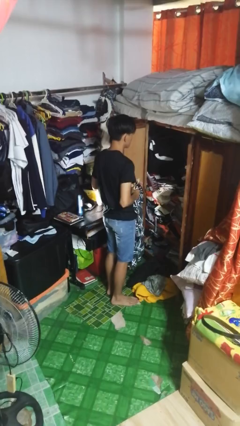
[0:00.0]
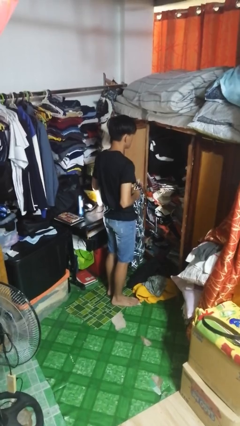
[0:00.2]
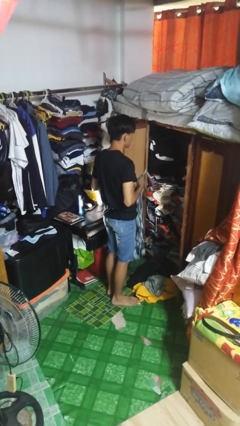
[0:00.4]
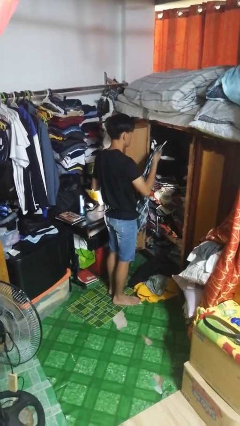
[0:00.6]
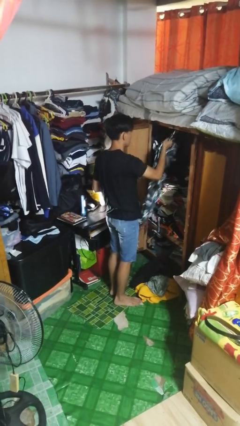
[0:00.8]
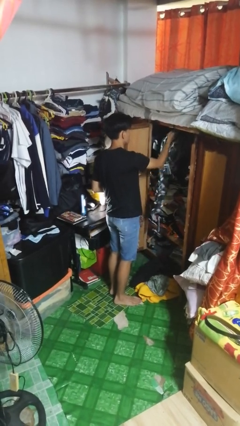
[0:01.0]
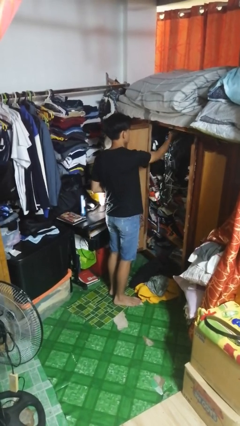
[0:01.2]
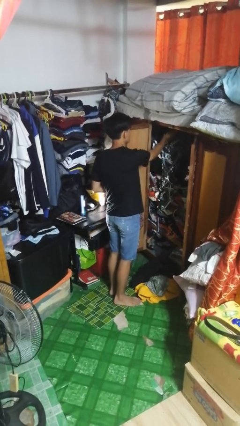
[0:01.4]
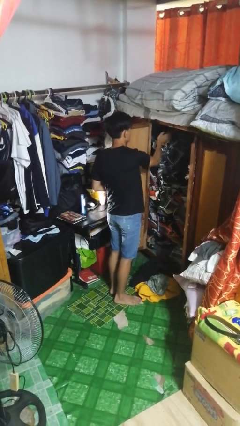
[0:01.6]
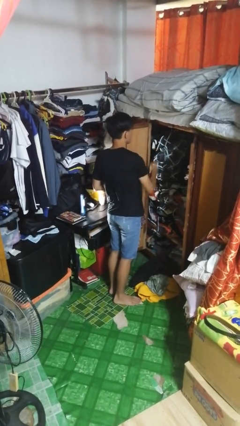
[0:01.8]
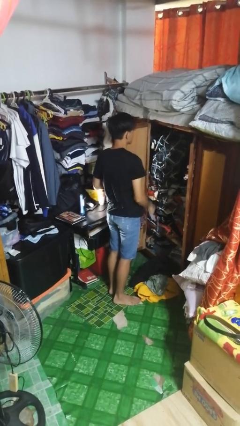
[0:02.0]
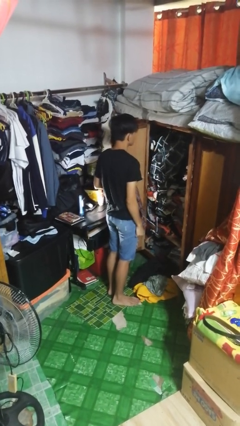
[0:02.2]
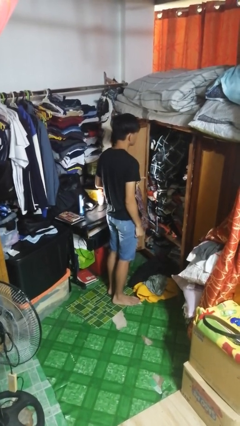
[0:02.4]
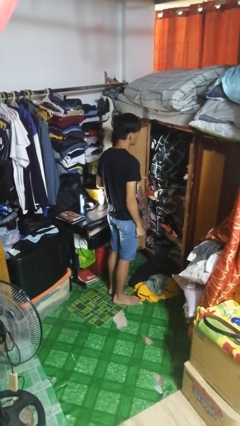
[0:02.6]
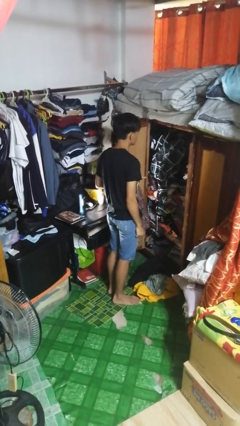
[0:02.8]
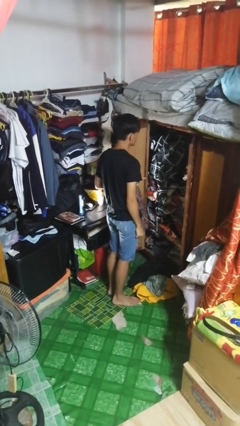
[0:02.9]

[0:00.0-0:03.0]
person puts clothes into closet

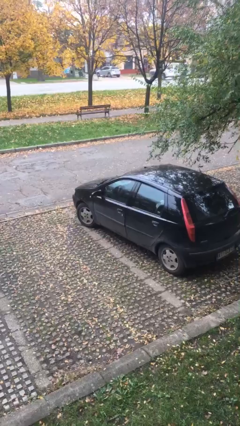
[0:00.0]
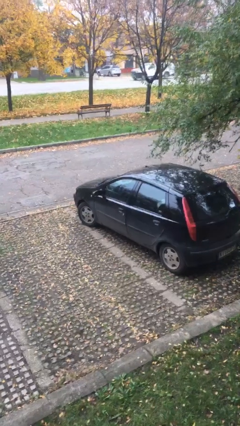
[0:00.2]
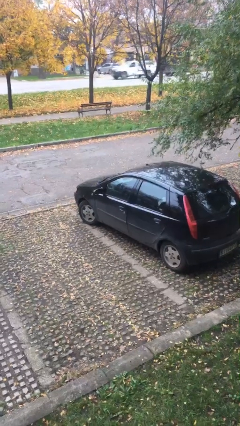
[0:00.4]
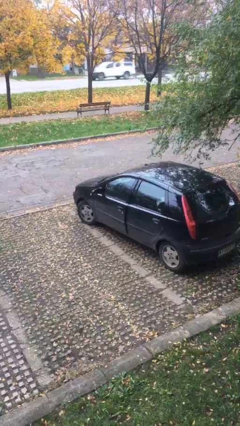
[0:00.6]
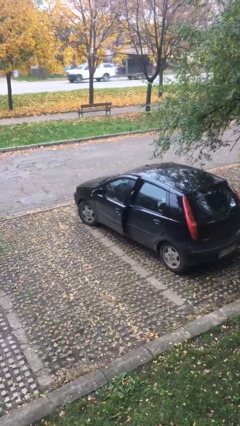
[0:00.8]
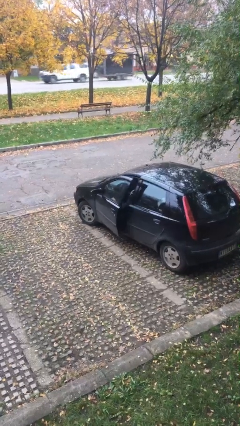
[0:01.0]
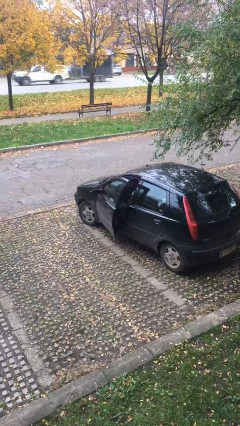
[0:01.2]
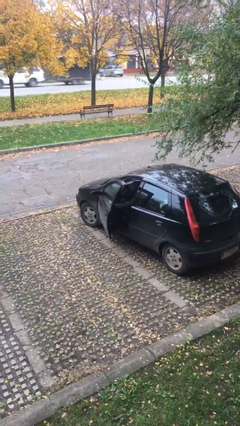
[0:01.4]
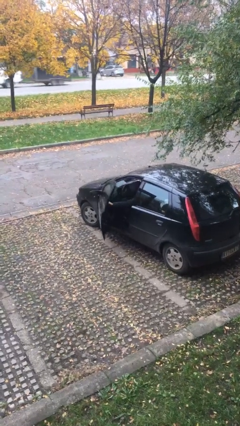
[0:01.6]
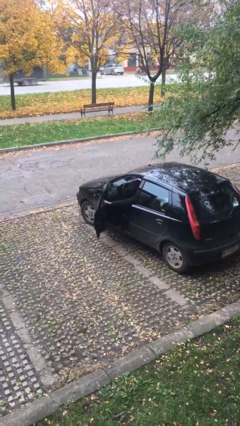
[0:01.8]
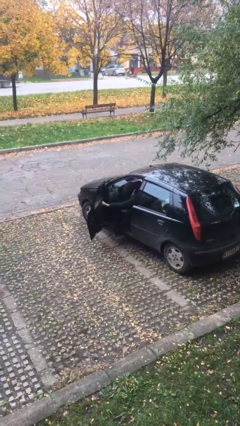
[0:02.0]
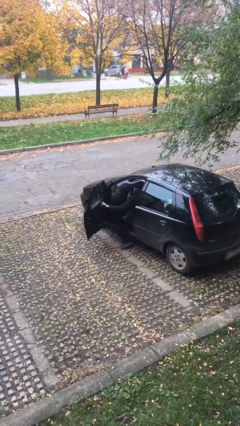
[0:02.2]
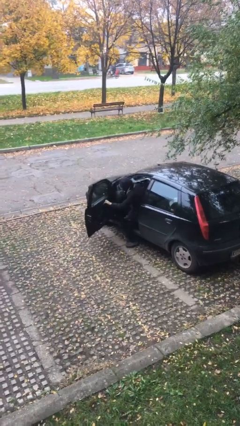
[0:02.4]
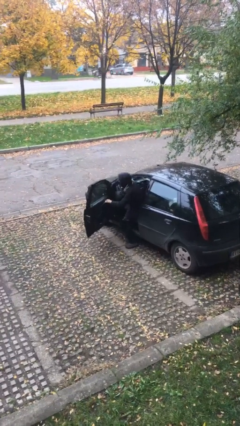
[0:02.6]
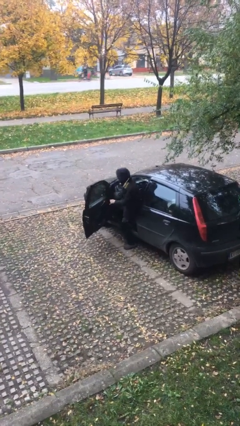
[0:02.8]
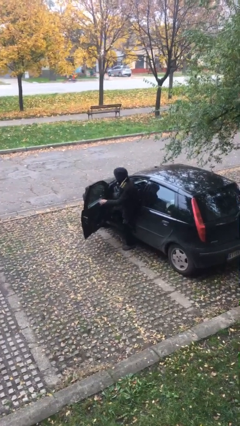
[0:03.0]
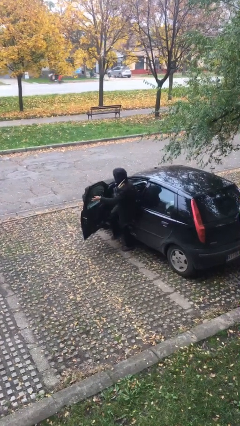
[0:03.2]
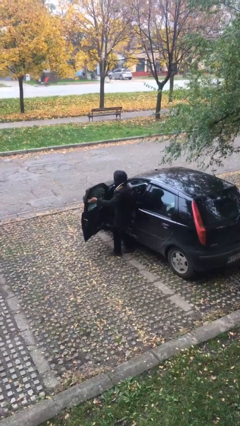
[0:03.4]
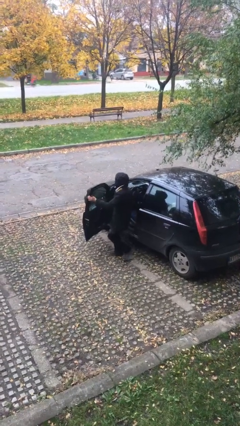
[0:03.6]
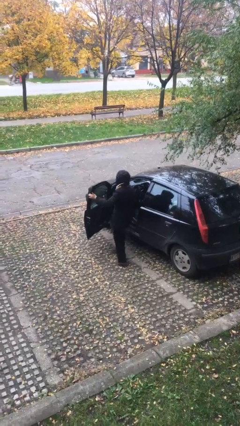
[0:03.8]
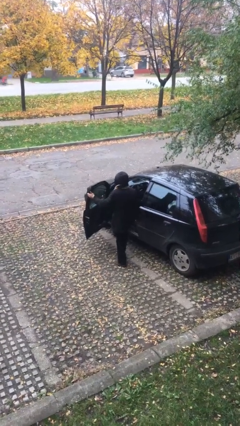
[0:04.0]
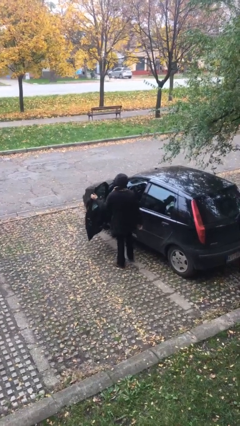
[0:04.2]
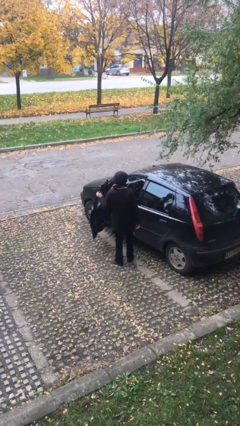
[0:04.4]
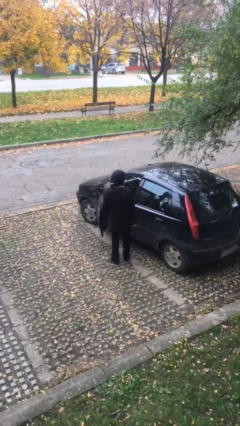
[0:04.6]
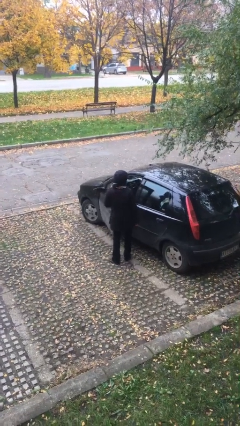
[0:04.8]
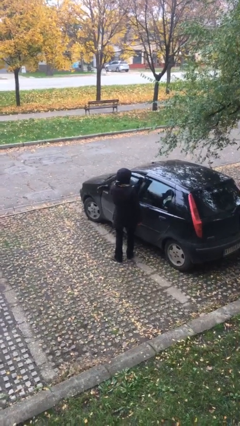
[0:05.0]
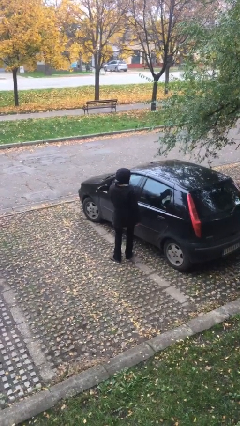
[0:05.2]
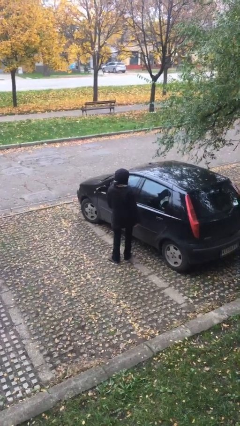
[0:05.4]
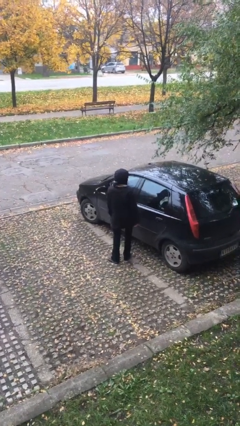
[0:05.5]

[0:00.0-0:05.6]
person exits car

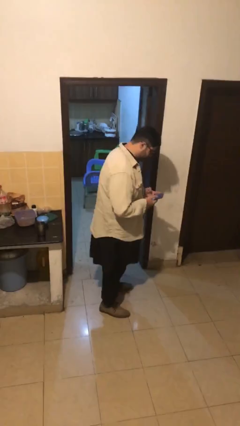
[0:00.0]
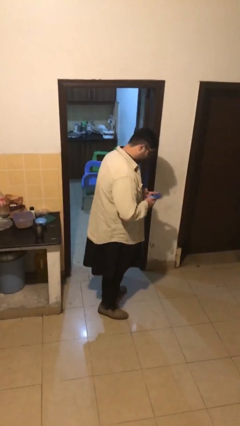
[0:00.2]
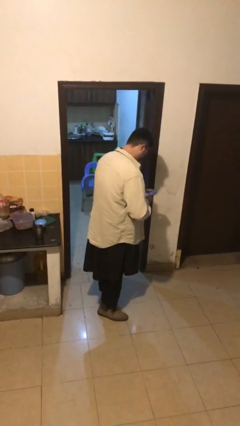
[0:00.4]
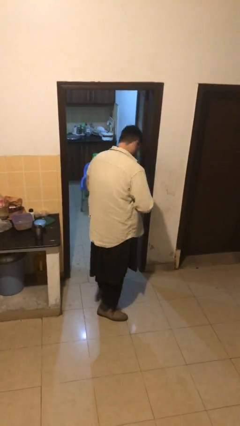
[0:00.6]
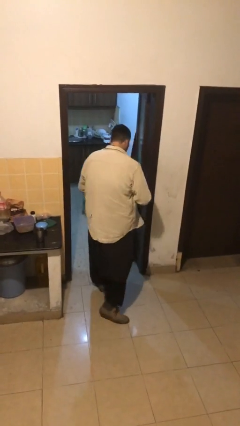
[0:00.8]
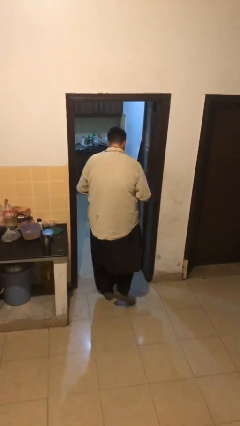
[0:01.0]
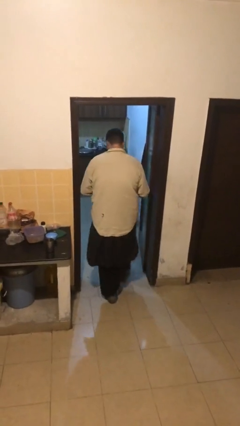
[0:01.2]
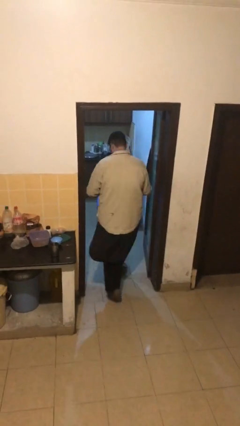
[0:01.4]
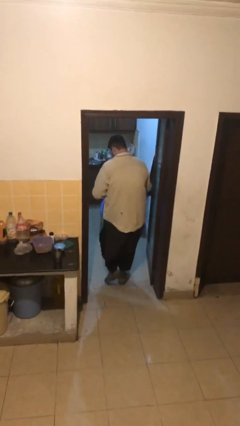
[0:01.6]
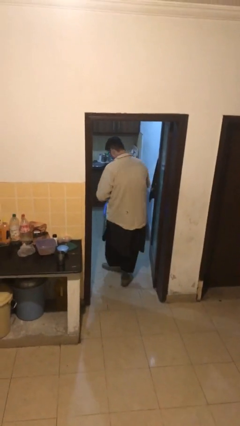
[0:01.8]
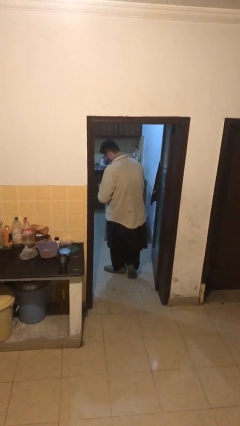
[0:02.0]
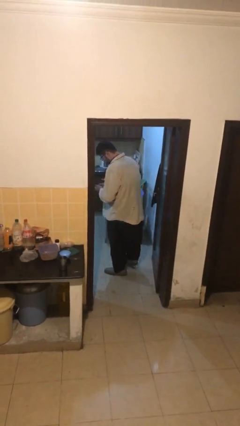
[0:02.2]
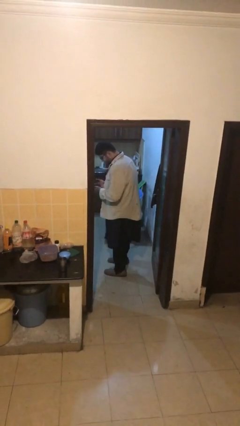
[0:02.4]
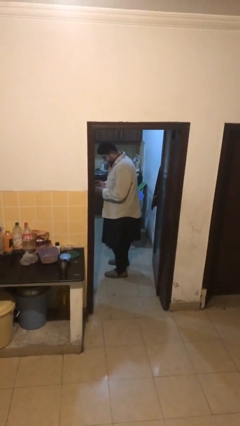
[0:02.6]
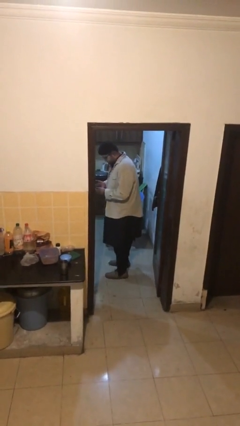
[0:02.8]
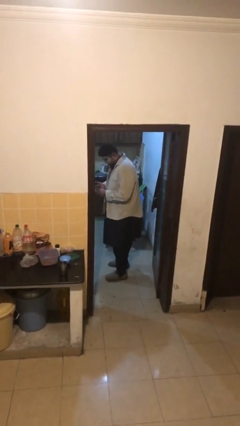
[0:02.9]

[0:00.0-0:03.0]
person exits scene through structure

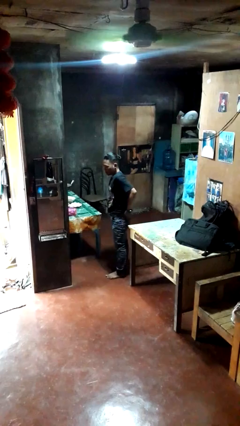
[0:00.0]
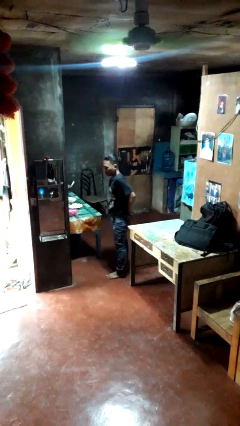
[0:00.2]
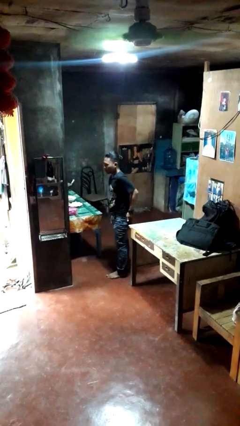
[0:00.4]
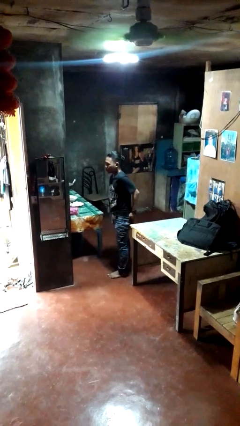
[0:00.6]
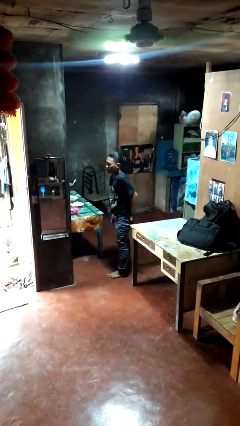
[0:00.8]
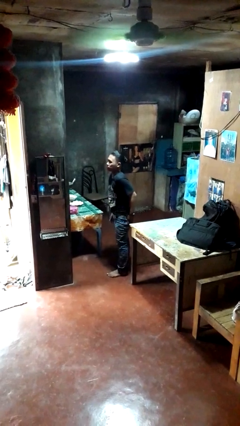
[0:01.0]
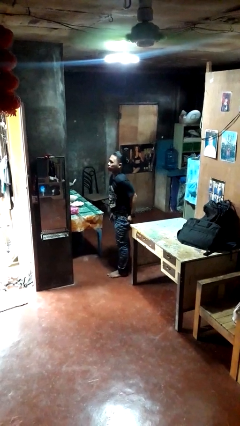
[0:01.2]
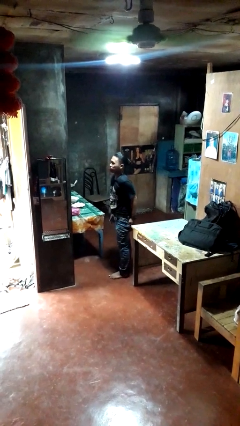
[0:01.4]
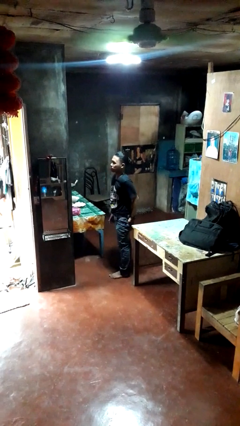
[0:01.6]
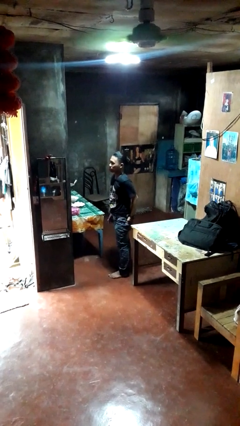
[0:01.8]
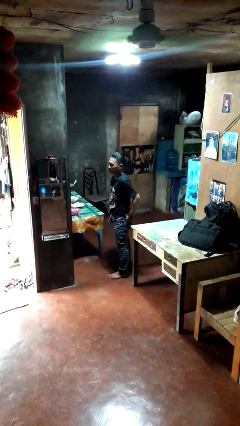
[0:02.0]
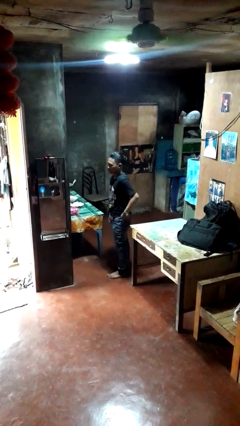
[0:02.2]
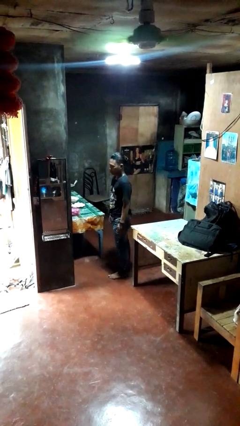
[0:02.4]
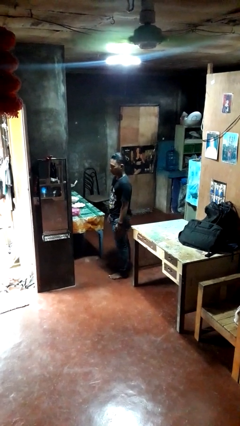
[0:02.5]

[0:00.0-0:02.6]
person puts hands in back pockets

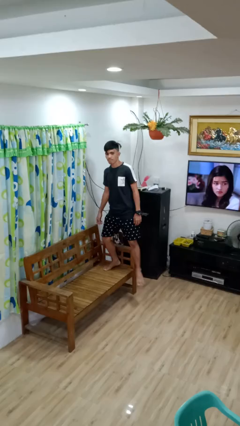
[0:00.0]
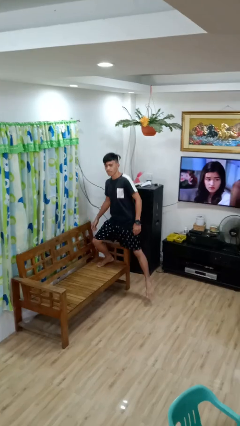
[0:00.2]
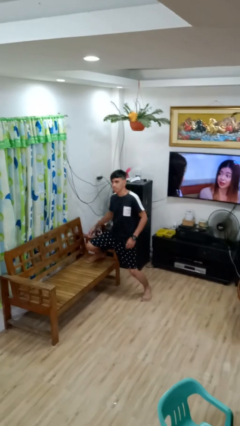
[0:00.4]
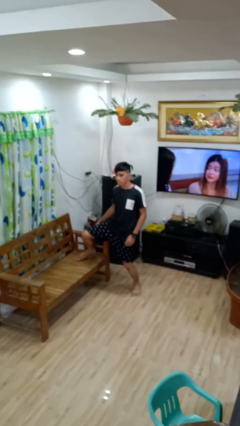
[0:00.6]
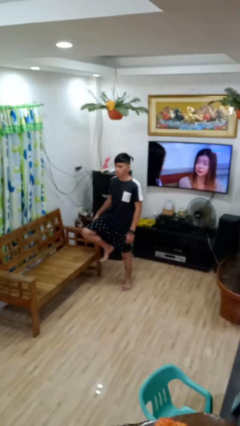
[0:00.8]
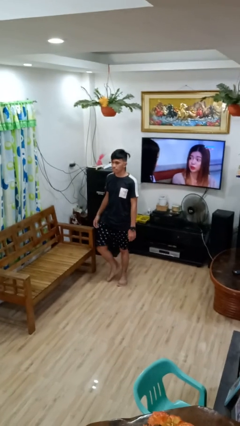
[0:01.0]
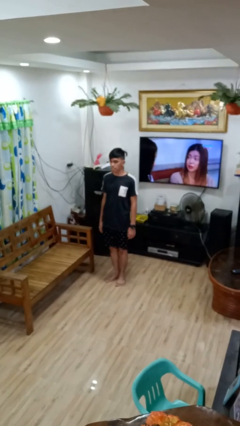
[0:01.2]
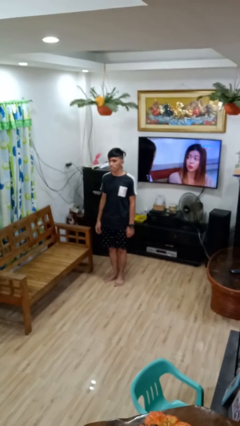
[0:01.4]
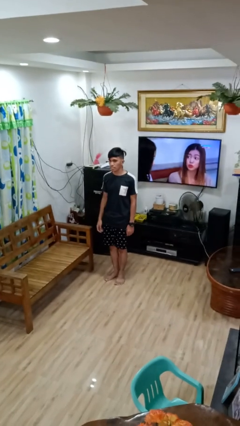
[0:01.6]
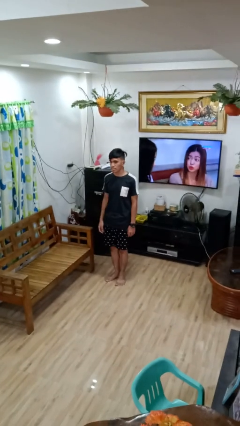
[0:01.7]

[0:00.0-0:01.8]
person climbs off couch

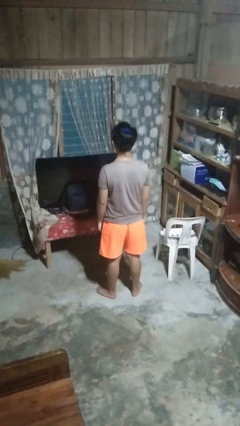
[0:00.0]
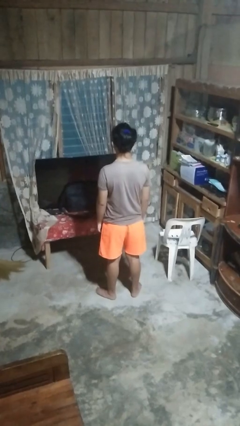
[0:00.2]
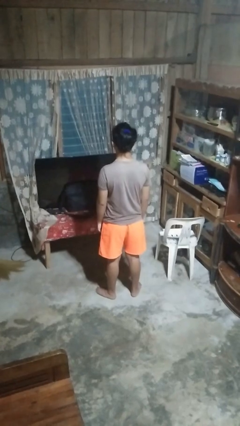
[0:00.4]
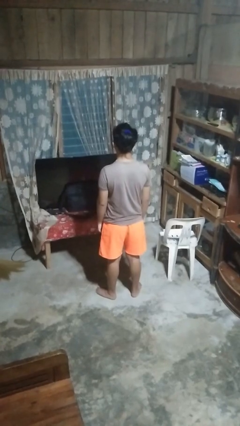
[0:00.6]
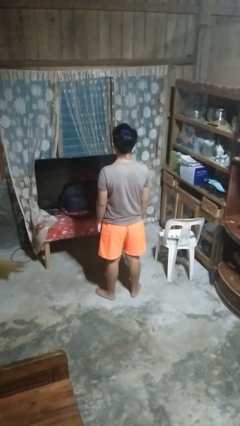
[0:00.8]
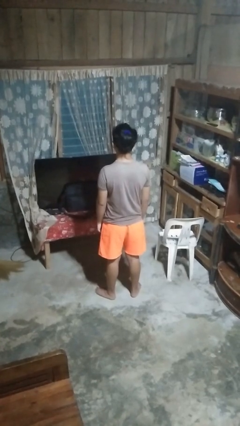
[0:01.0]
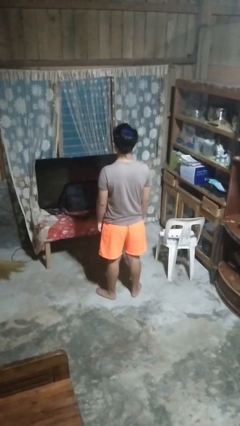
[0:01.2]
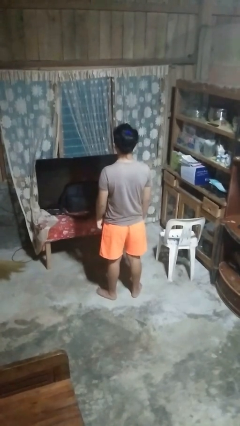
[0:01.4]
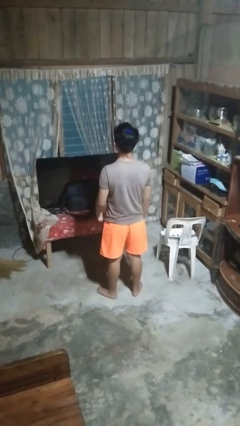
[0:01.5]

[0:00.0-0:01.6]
person gestures number four
